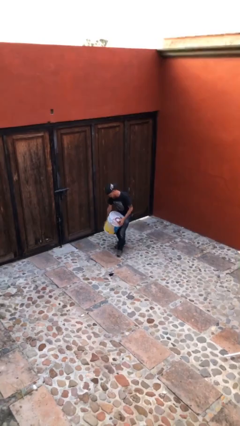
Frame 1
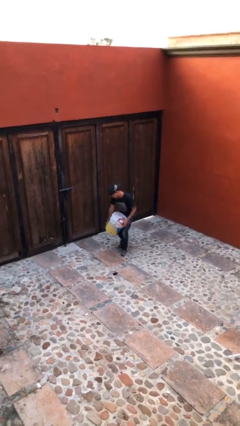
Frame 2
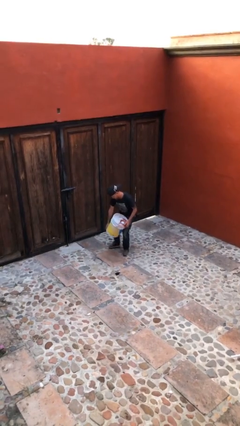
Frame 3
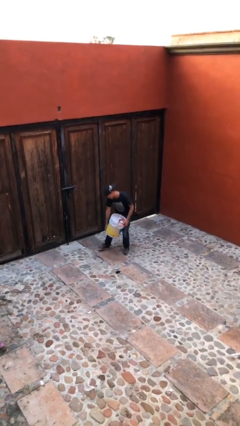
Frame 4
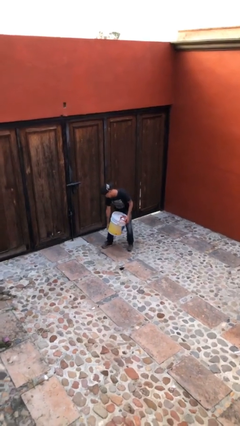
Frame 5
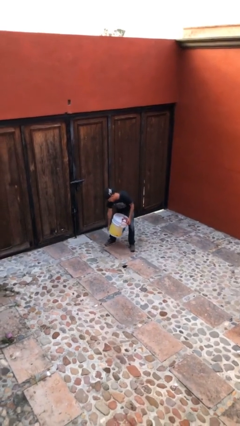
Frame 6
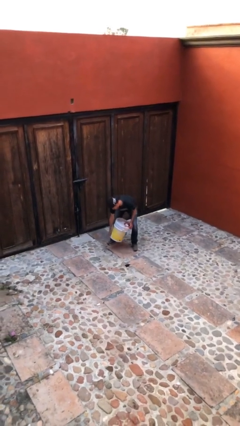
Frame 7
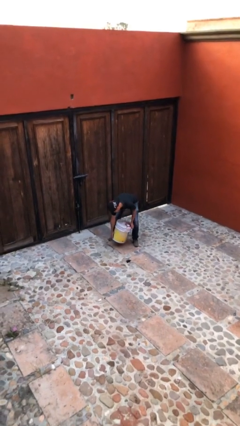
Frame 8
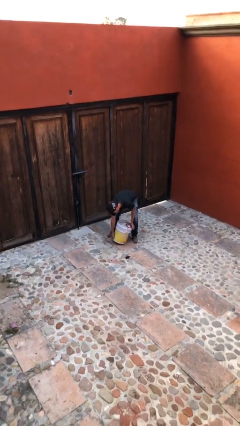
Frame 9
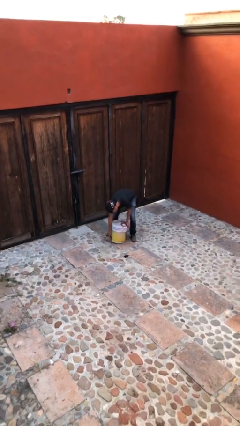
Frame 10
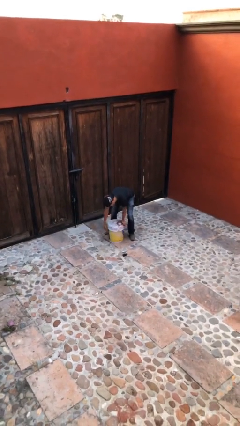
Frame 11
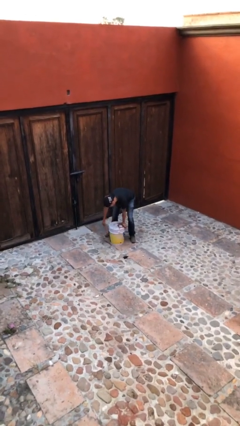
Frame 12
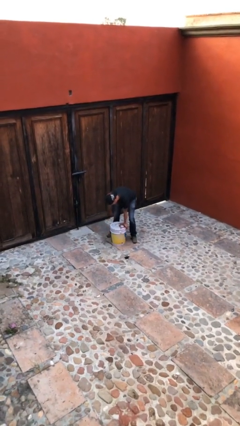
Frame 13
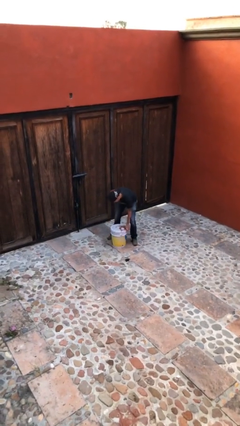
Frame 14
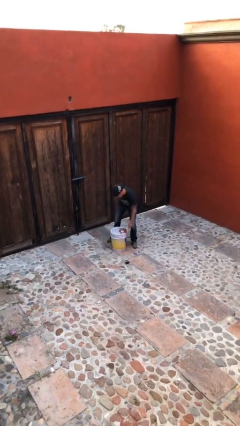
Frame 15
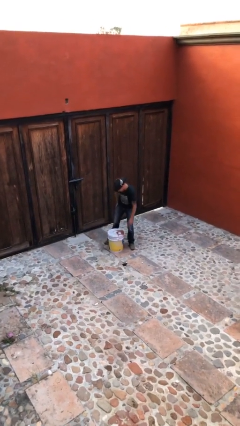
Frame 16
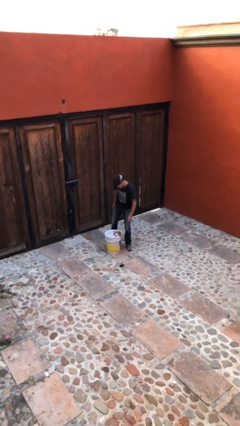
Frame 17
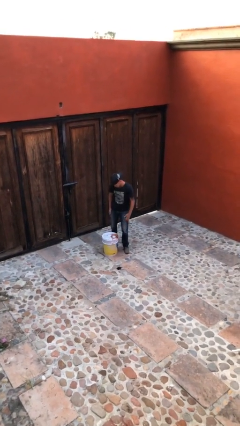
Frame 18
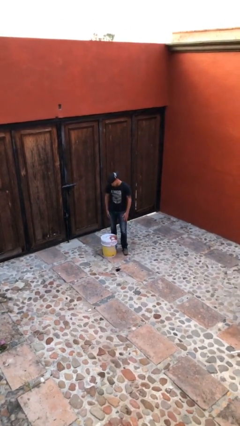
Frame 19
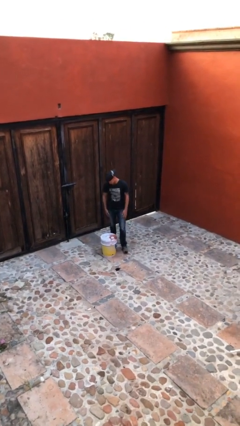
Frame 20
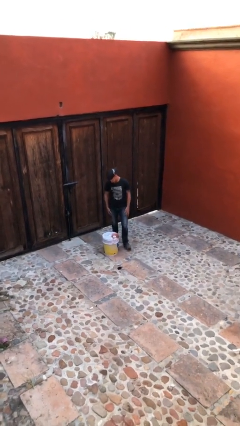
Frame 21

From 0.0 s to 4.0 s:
person puts down object on floor

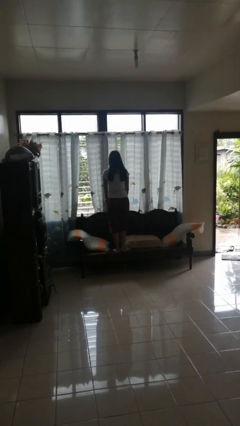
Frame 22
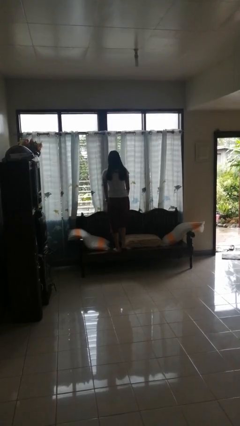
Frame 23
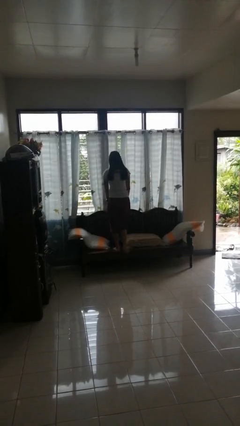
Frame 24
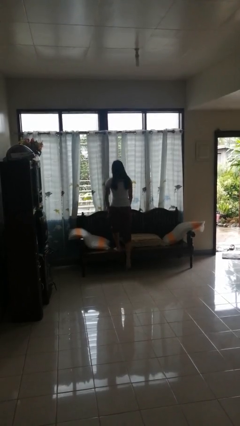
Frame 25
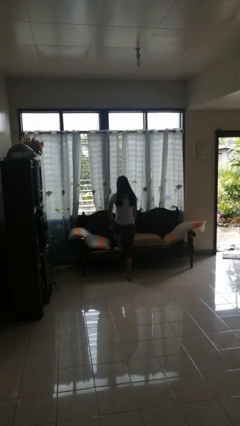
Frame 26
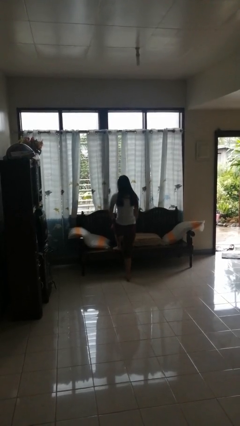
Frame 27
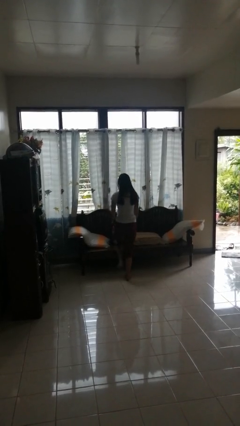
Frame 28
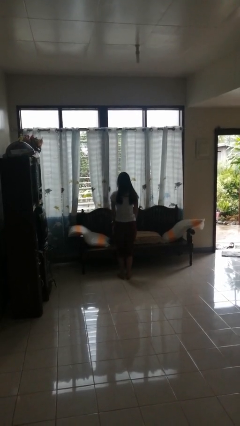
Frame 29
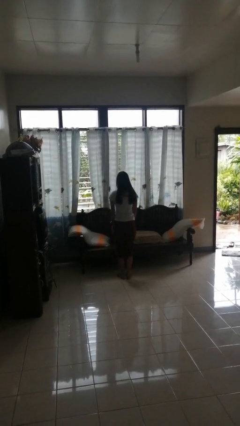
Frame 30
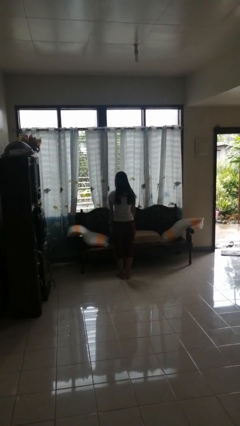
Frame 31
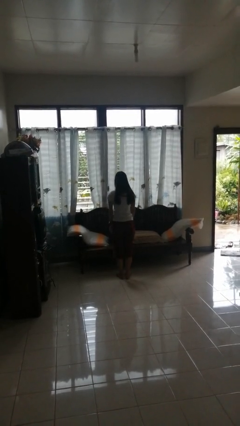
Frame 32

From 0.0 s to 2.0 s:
person climbs off couch

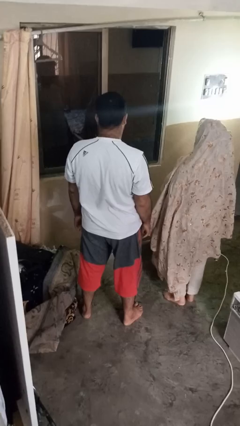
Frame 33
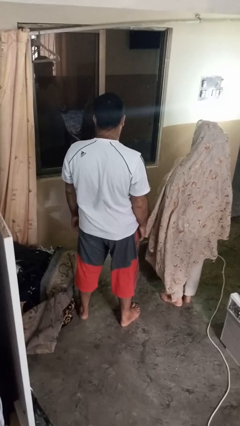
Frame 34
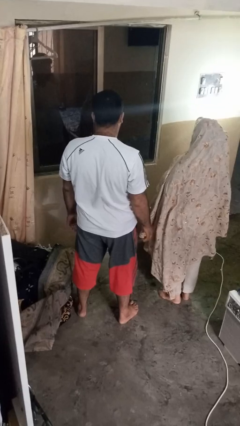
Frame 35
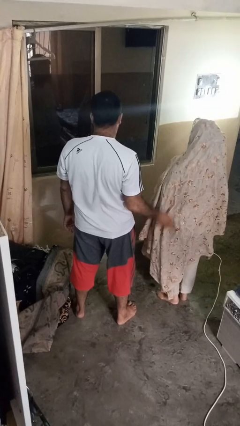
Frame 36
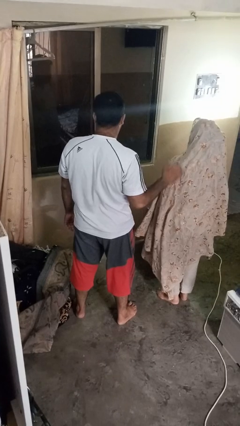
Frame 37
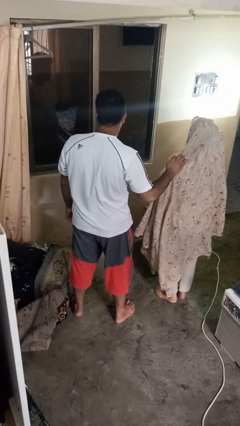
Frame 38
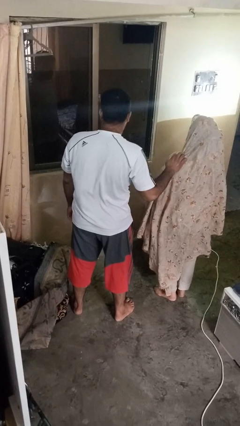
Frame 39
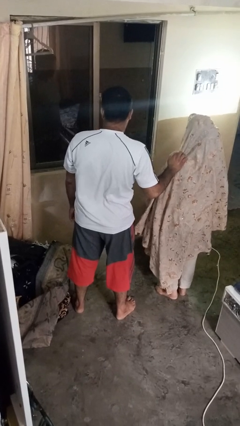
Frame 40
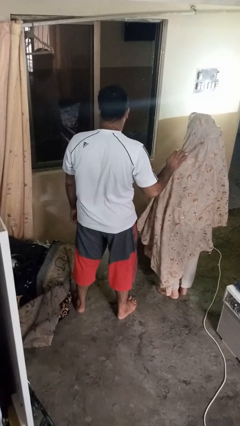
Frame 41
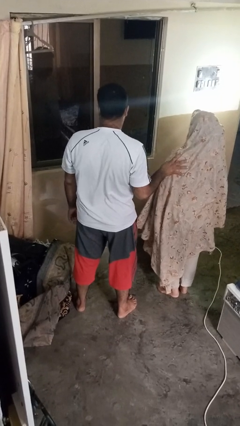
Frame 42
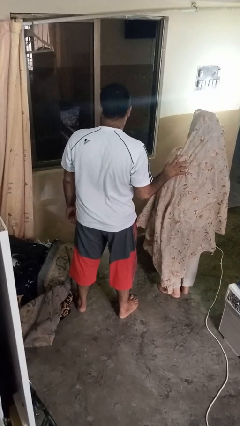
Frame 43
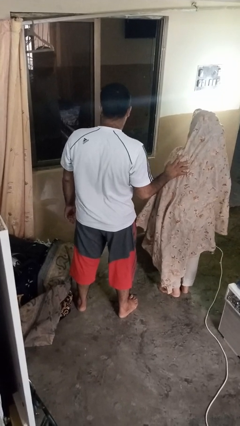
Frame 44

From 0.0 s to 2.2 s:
person grabs person by bicep

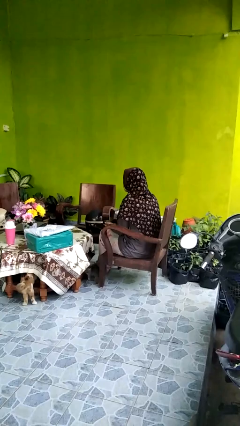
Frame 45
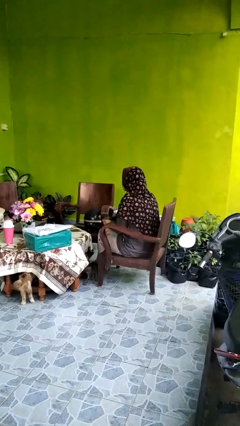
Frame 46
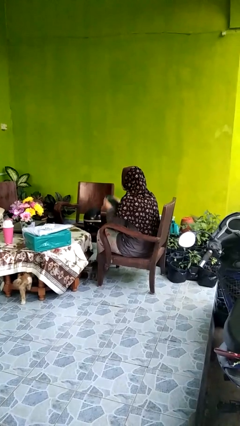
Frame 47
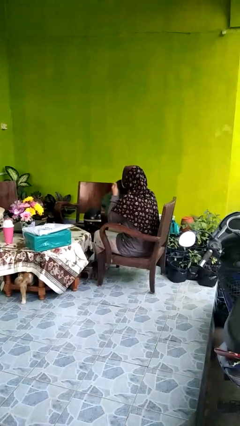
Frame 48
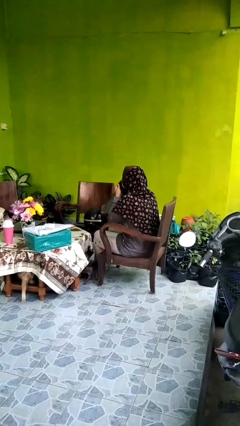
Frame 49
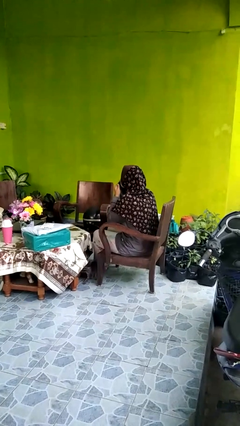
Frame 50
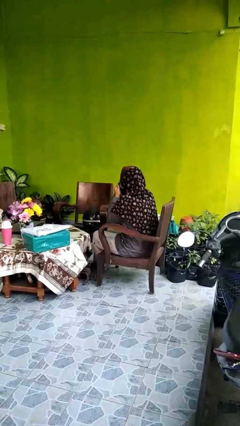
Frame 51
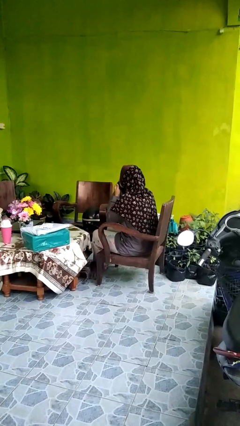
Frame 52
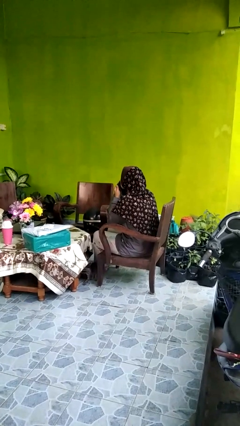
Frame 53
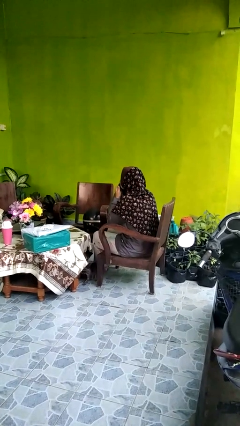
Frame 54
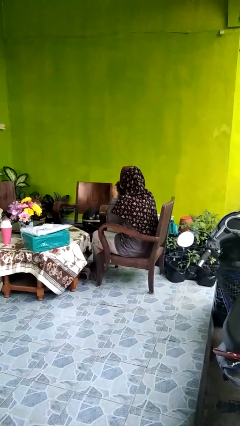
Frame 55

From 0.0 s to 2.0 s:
person wipes mouth with napkin

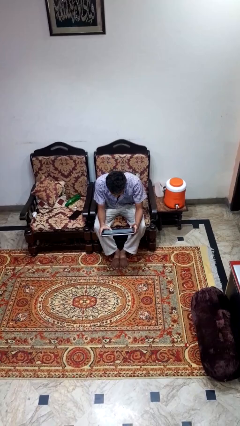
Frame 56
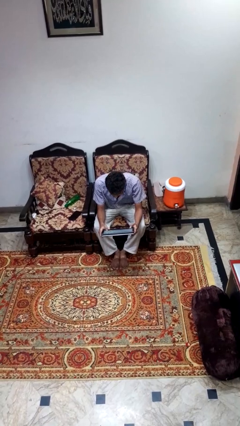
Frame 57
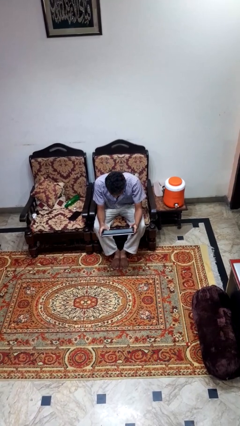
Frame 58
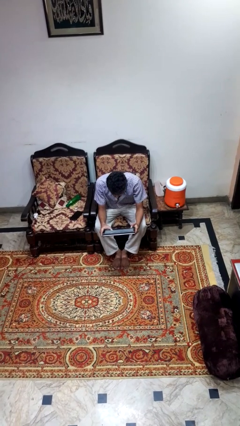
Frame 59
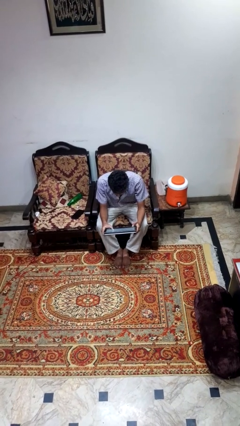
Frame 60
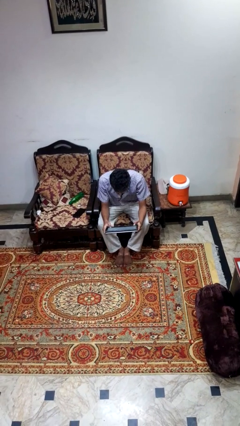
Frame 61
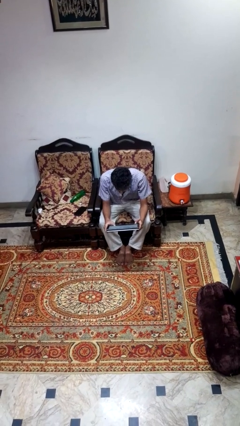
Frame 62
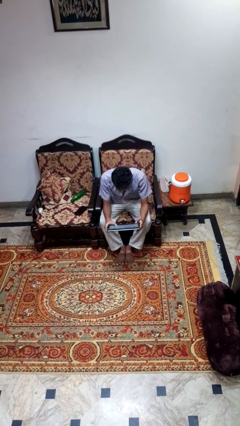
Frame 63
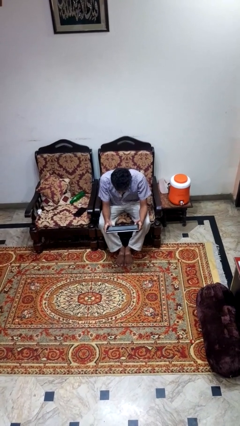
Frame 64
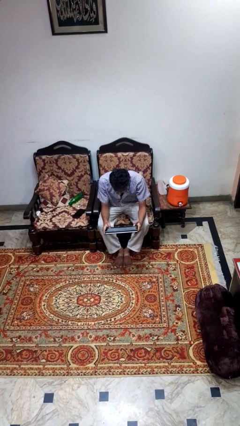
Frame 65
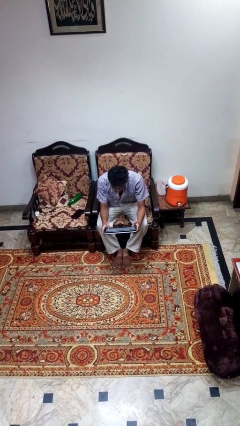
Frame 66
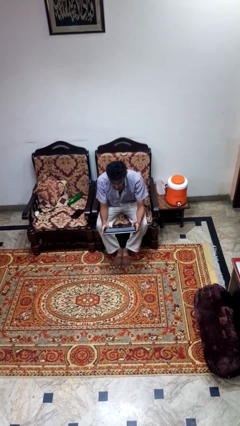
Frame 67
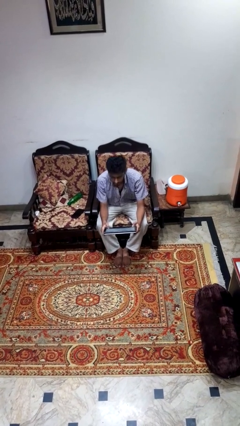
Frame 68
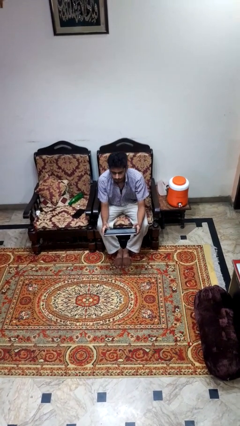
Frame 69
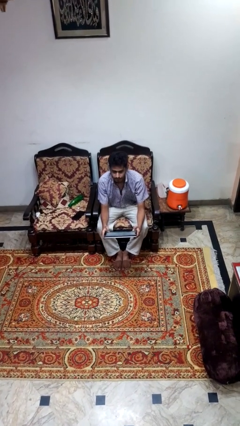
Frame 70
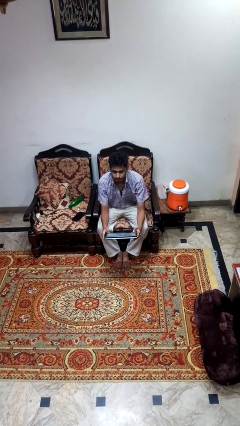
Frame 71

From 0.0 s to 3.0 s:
person reads newspaper

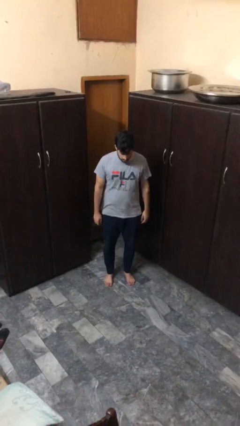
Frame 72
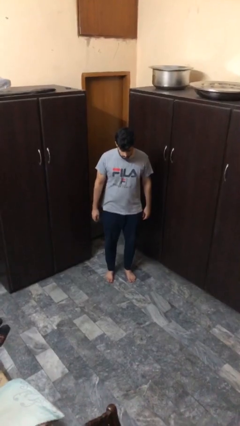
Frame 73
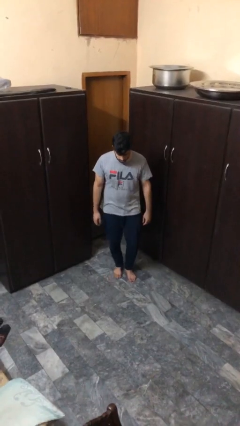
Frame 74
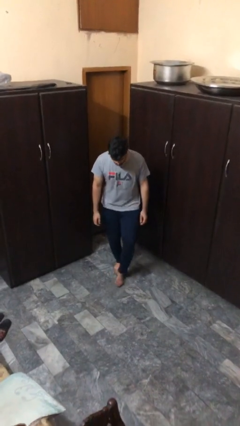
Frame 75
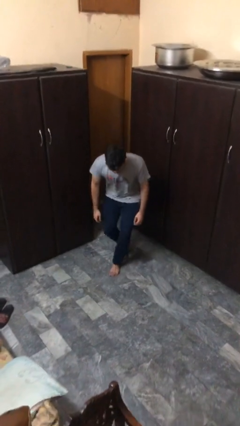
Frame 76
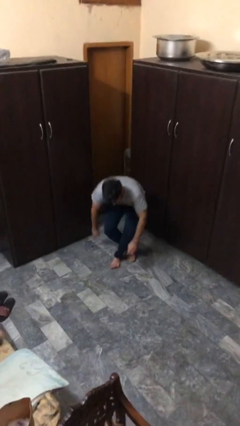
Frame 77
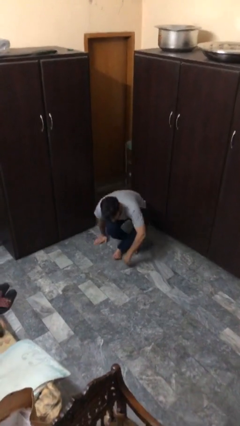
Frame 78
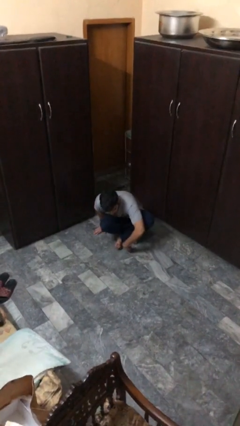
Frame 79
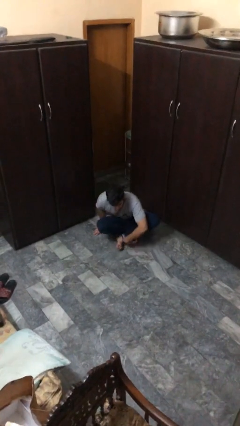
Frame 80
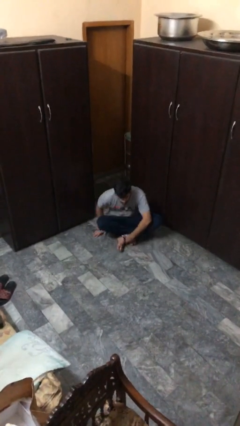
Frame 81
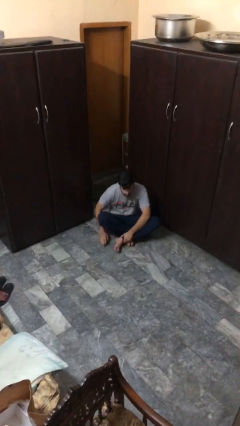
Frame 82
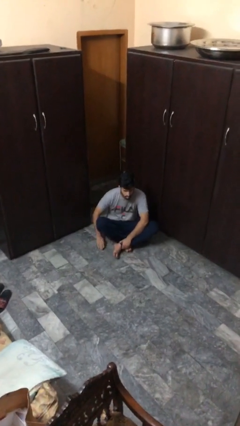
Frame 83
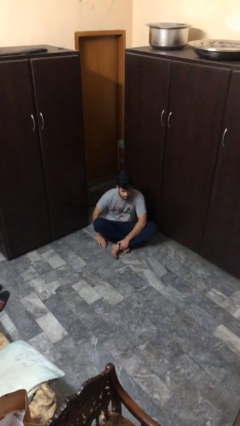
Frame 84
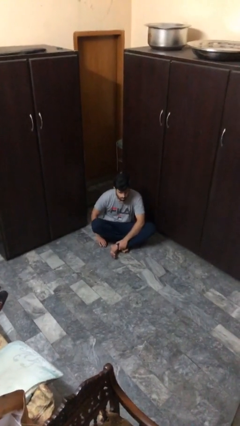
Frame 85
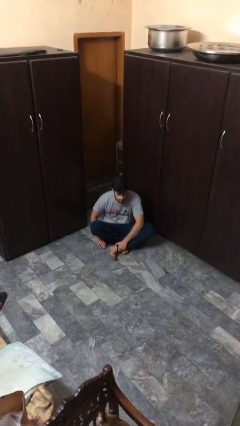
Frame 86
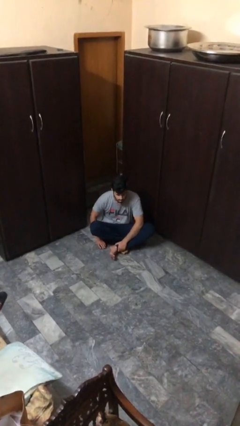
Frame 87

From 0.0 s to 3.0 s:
person sits crisscross

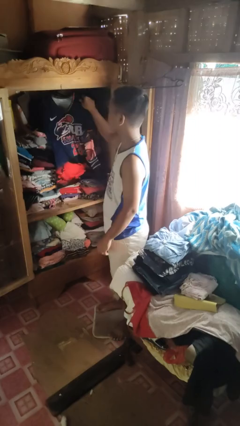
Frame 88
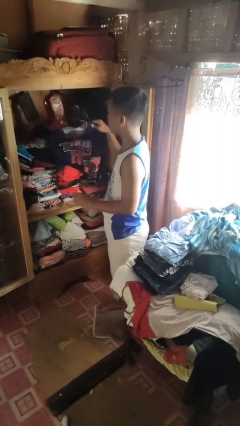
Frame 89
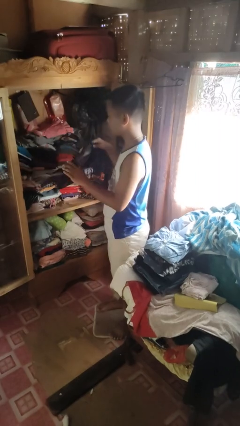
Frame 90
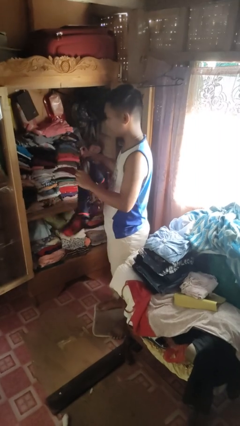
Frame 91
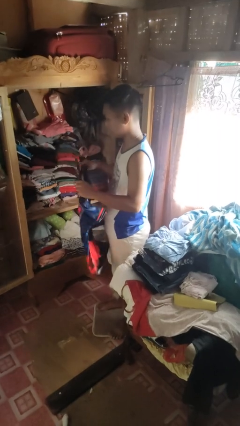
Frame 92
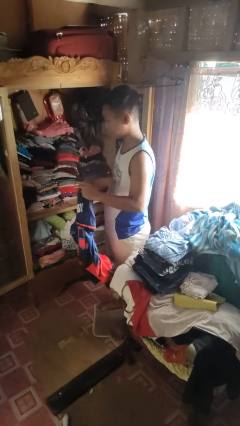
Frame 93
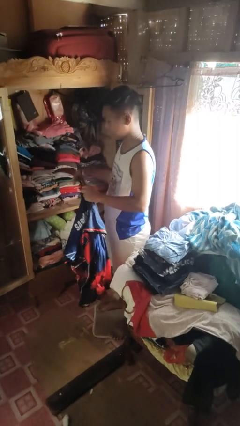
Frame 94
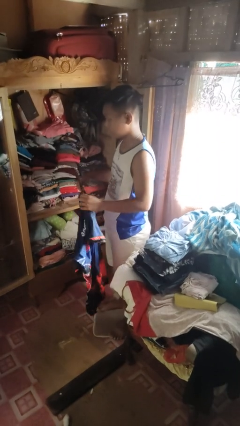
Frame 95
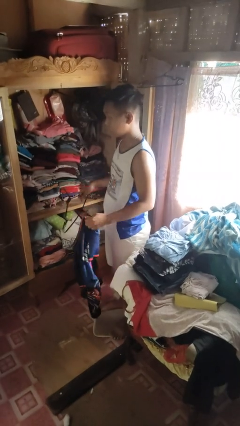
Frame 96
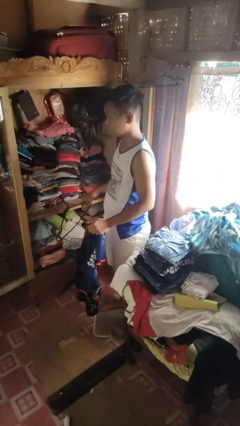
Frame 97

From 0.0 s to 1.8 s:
person takes clothes from closet
